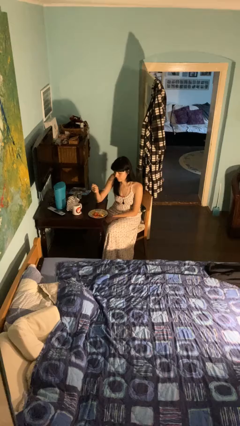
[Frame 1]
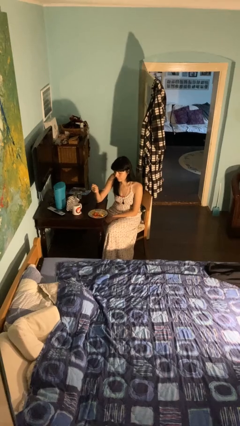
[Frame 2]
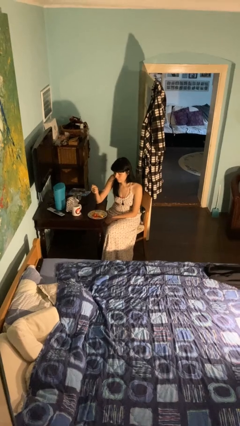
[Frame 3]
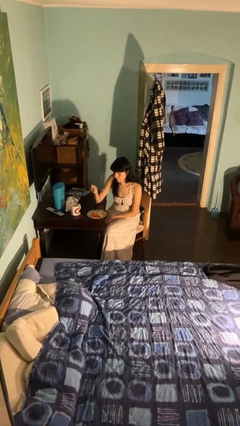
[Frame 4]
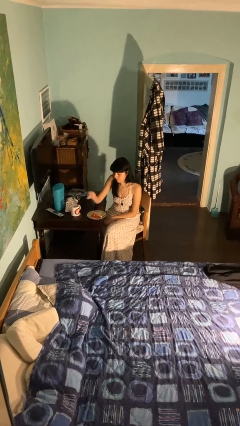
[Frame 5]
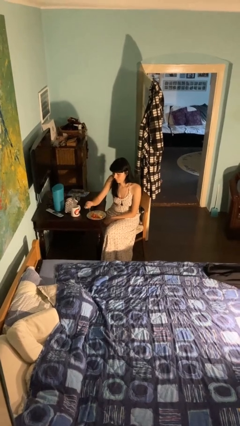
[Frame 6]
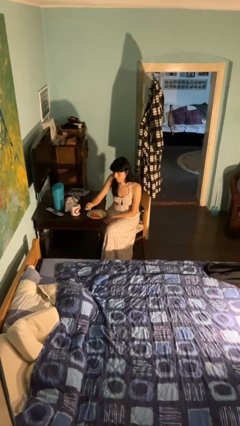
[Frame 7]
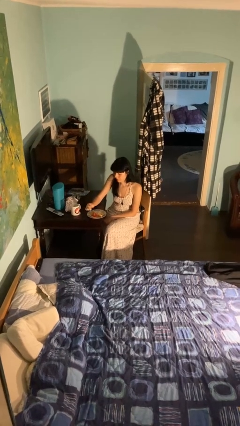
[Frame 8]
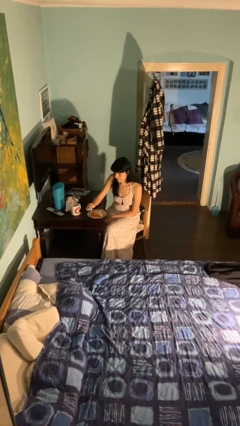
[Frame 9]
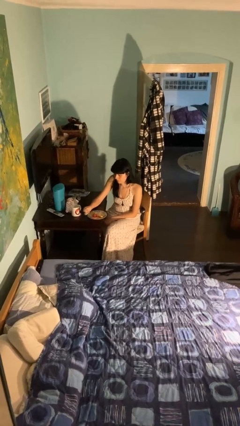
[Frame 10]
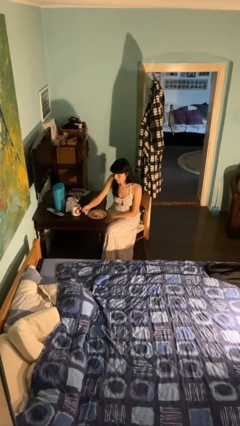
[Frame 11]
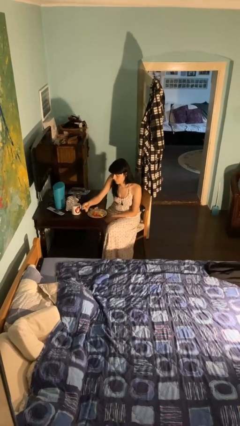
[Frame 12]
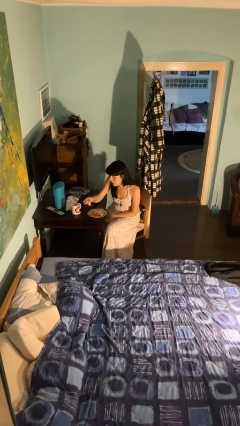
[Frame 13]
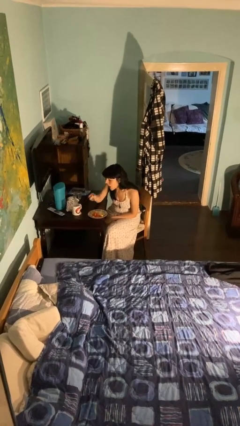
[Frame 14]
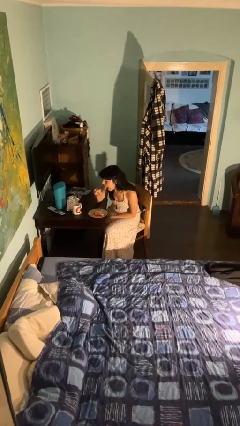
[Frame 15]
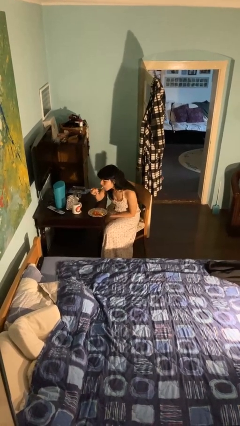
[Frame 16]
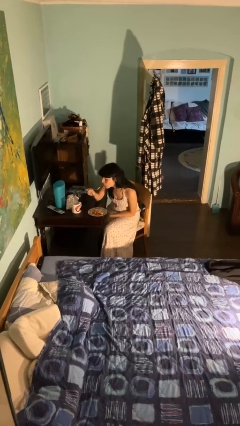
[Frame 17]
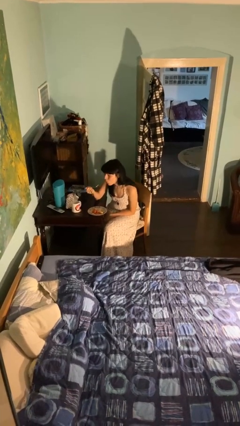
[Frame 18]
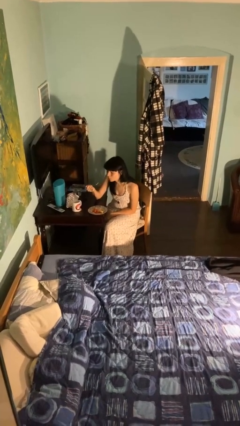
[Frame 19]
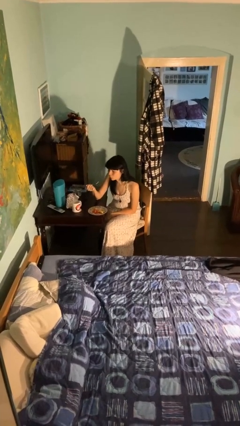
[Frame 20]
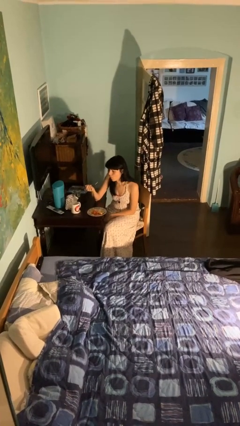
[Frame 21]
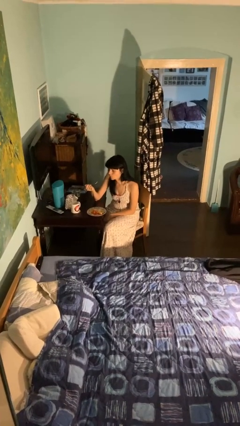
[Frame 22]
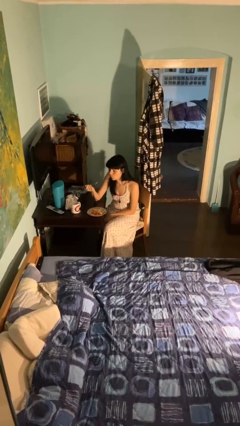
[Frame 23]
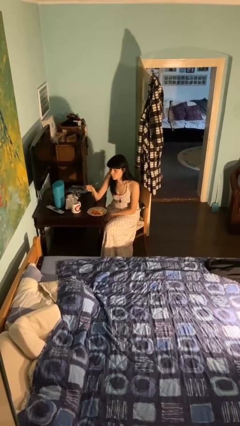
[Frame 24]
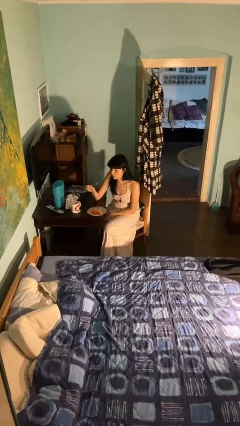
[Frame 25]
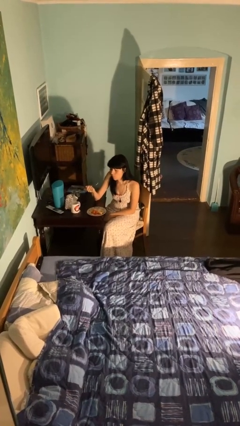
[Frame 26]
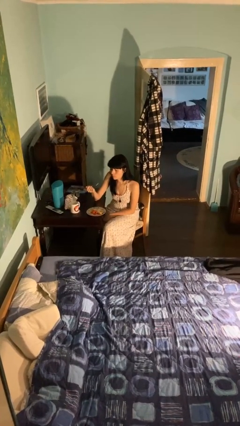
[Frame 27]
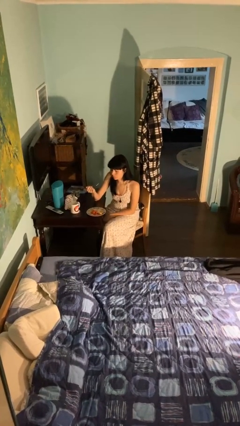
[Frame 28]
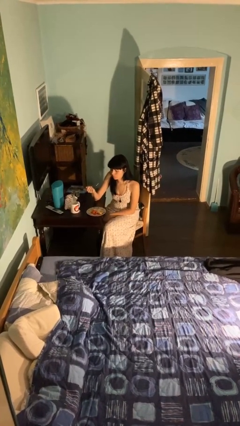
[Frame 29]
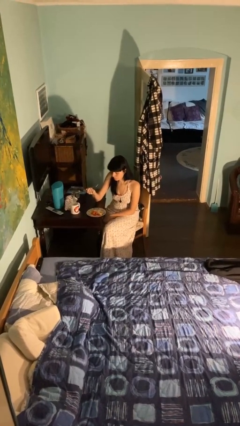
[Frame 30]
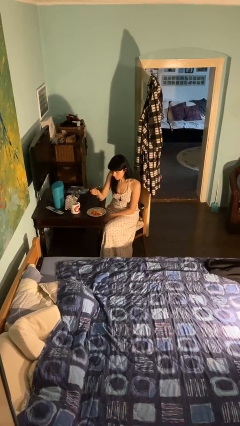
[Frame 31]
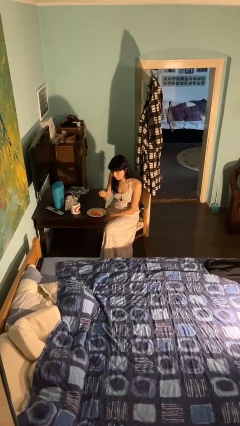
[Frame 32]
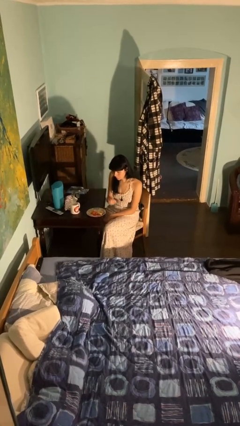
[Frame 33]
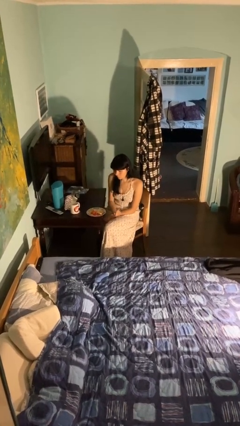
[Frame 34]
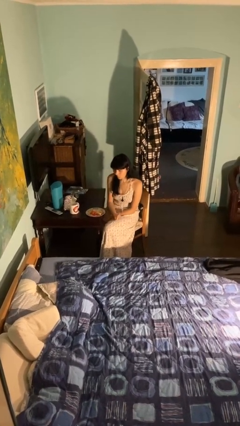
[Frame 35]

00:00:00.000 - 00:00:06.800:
person eats with utensil

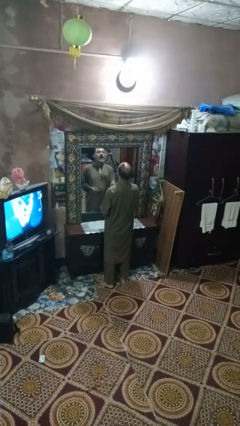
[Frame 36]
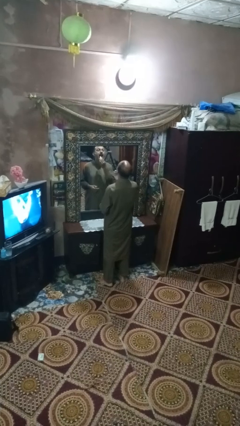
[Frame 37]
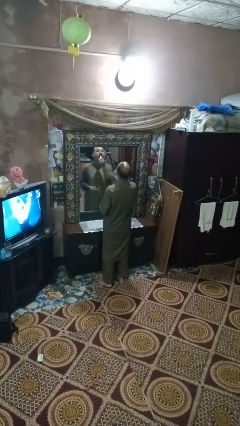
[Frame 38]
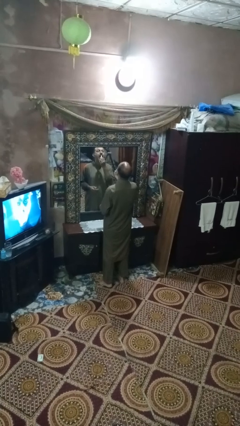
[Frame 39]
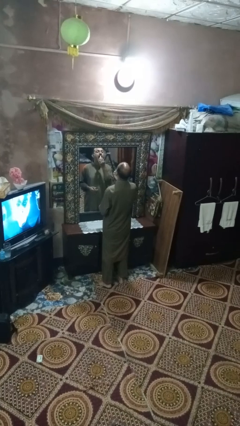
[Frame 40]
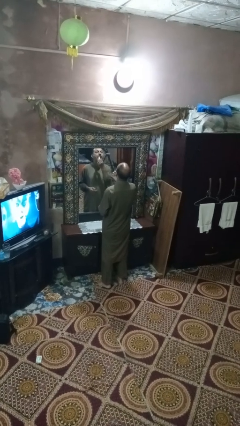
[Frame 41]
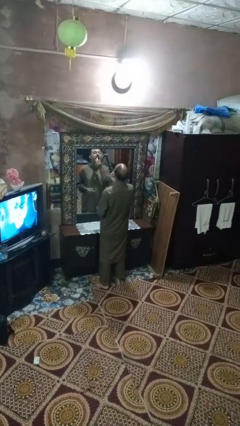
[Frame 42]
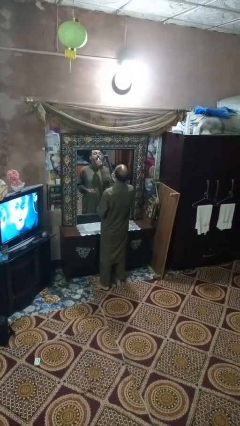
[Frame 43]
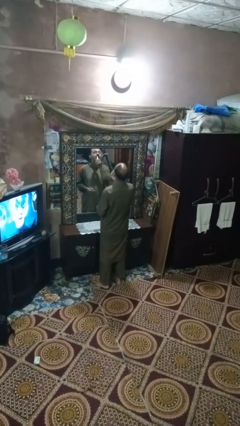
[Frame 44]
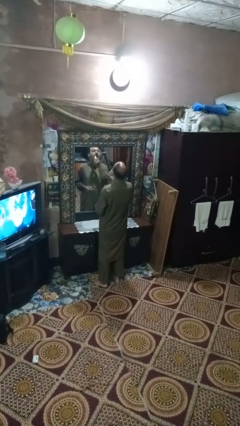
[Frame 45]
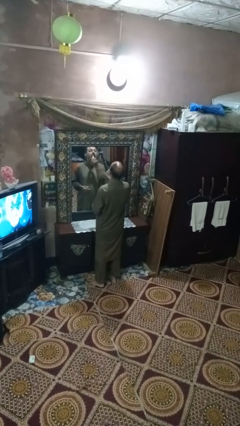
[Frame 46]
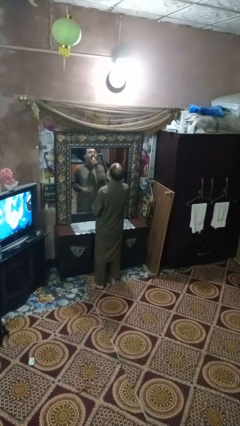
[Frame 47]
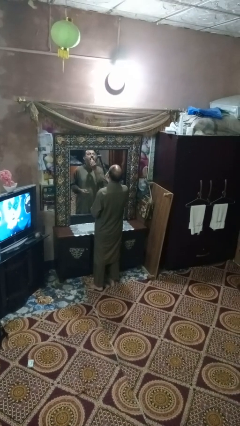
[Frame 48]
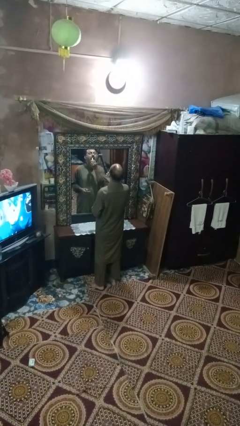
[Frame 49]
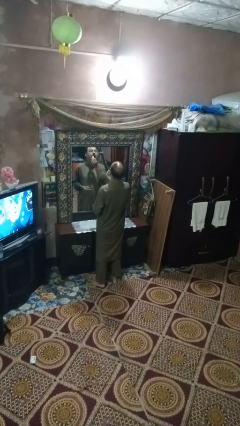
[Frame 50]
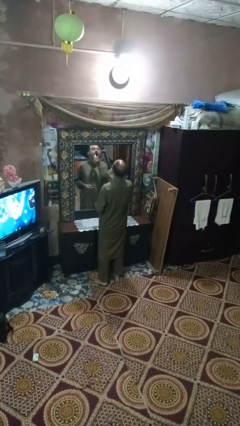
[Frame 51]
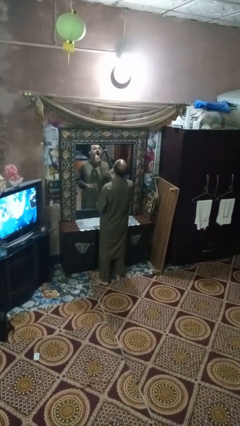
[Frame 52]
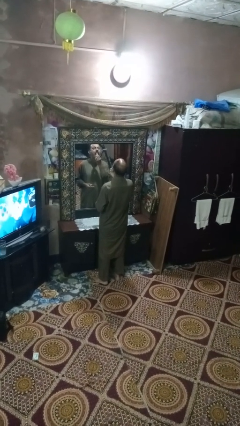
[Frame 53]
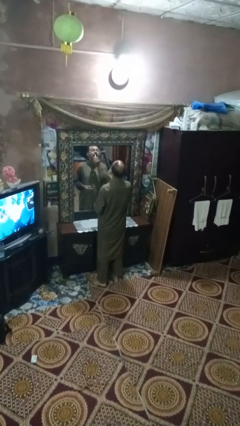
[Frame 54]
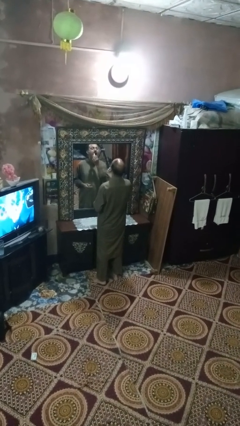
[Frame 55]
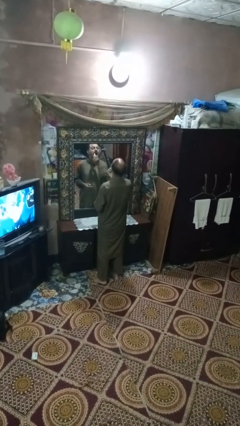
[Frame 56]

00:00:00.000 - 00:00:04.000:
person applies lip makeup

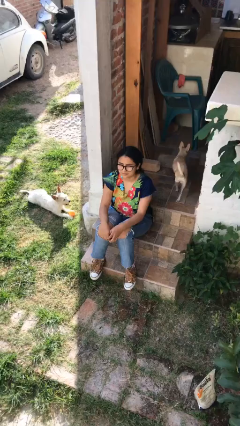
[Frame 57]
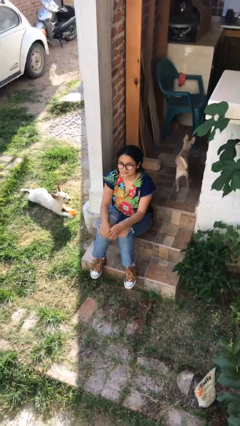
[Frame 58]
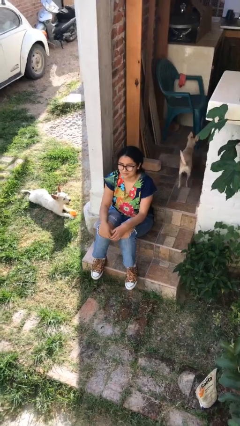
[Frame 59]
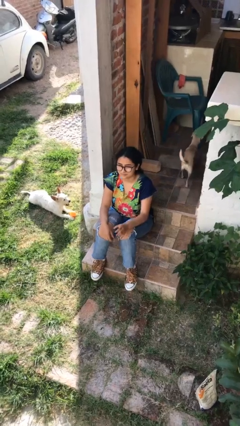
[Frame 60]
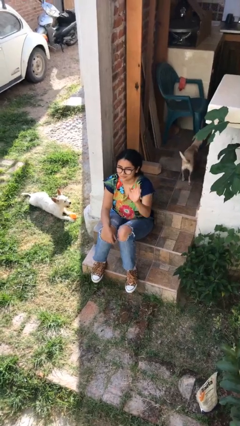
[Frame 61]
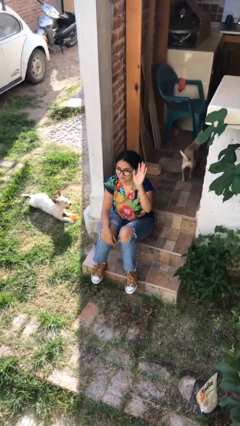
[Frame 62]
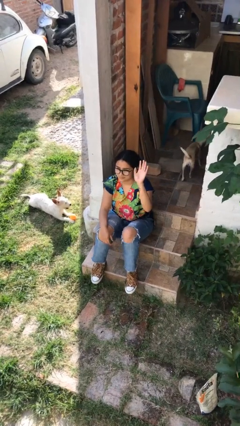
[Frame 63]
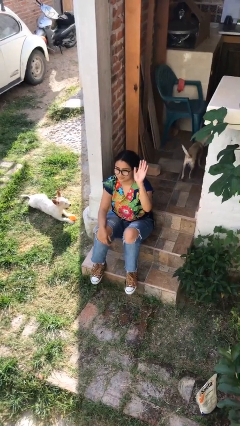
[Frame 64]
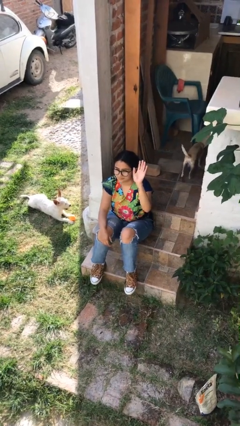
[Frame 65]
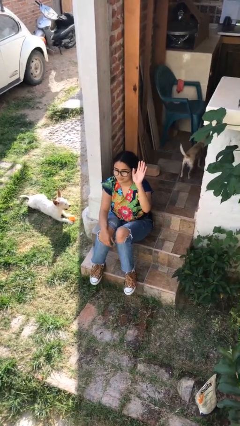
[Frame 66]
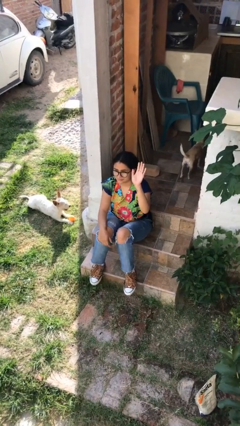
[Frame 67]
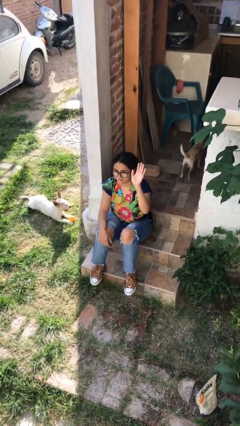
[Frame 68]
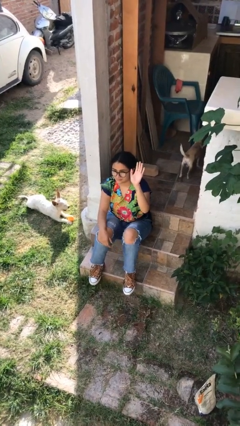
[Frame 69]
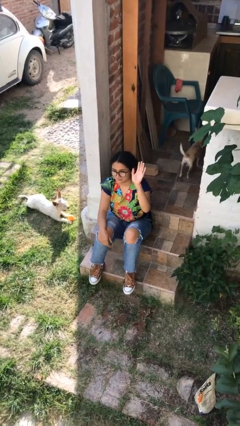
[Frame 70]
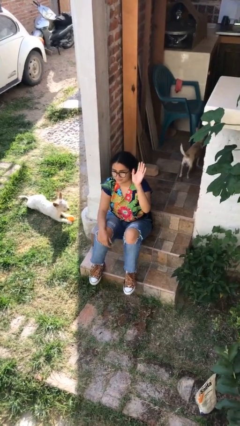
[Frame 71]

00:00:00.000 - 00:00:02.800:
person gestures raise hand

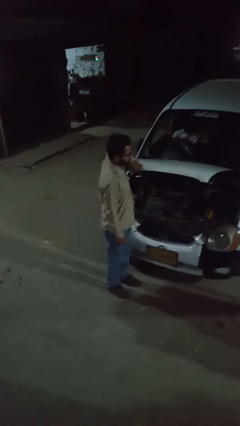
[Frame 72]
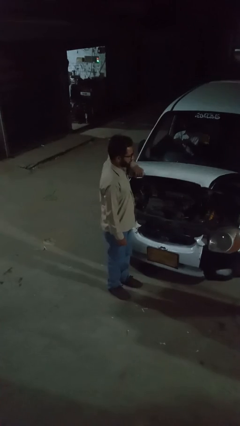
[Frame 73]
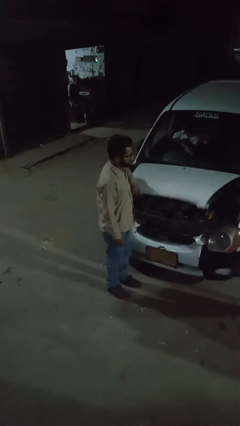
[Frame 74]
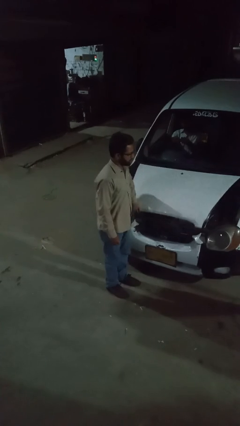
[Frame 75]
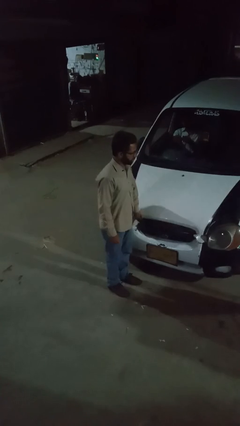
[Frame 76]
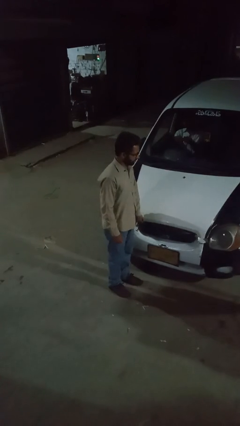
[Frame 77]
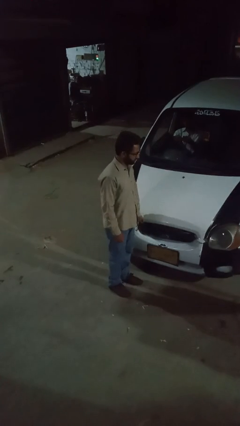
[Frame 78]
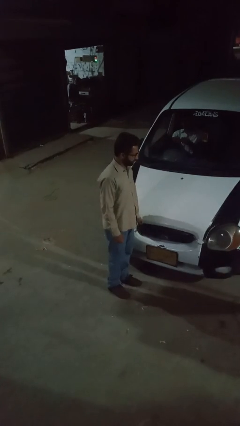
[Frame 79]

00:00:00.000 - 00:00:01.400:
person closes car hood

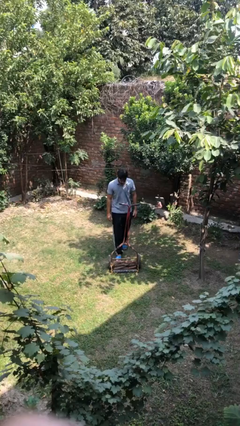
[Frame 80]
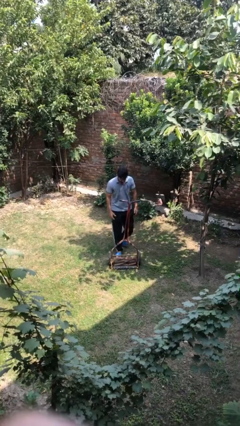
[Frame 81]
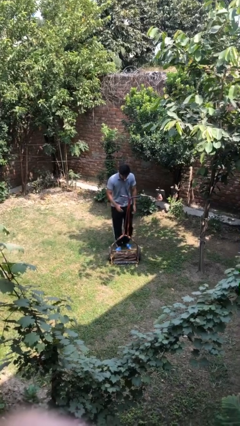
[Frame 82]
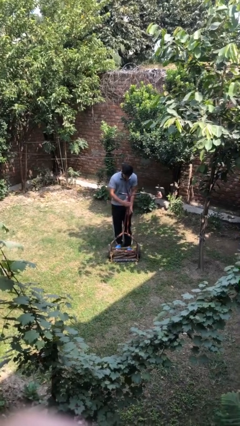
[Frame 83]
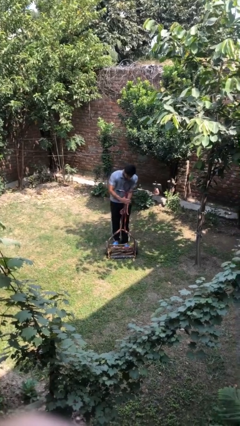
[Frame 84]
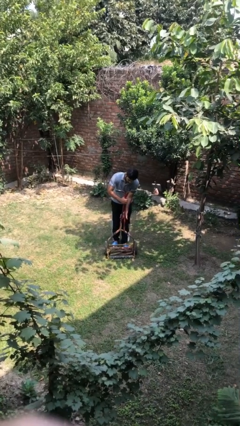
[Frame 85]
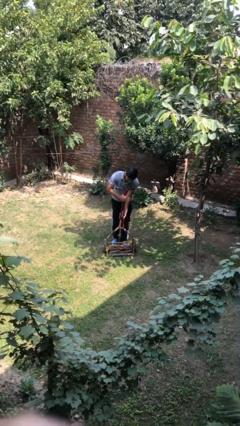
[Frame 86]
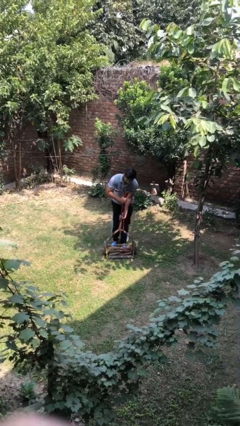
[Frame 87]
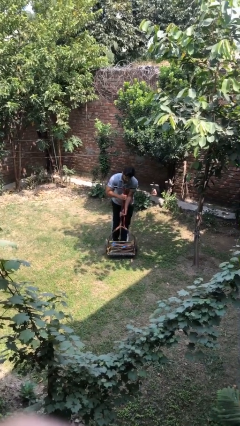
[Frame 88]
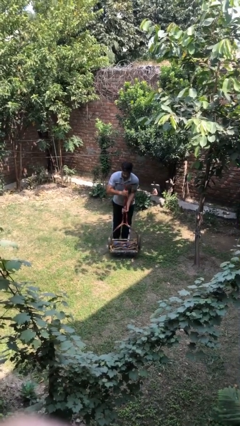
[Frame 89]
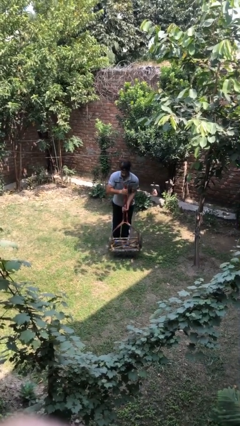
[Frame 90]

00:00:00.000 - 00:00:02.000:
person picks up object from floor

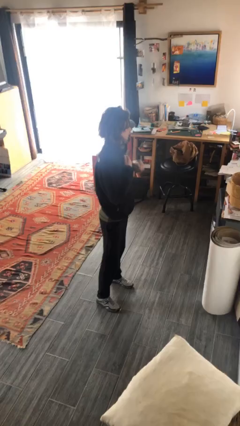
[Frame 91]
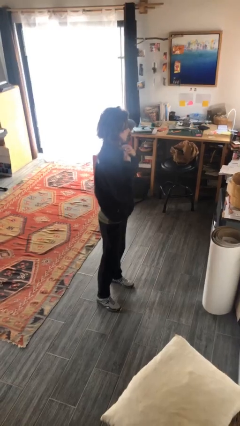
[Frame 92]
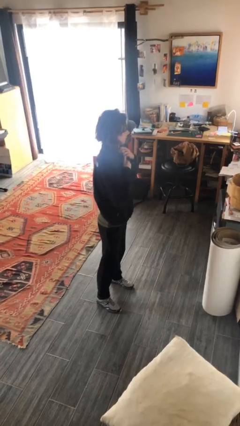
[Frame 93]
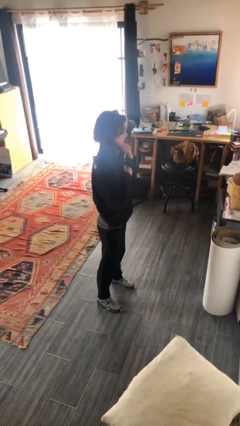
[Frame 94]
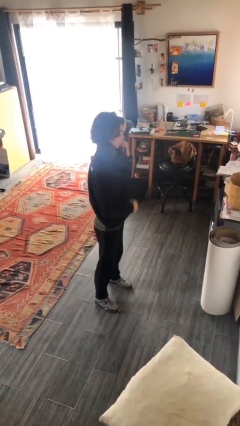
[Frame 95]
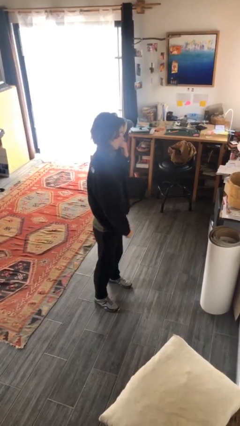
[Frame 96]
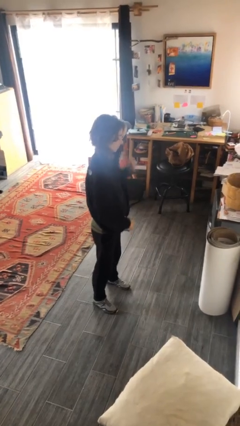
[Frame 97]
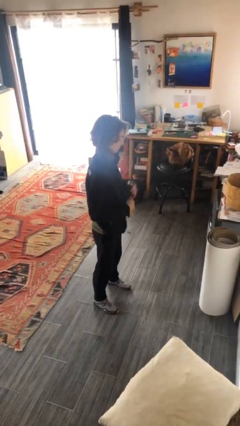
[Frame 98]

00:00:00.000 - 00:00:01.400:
person unzips jacket
